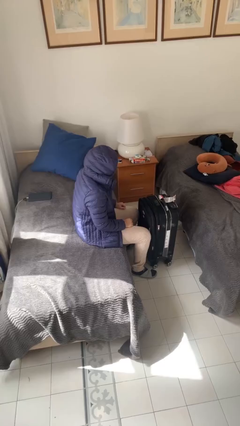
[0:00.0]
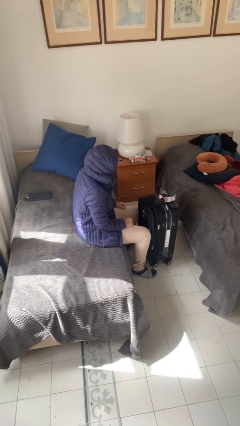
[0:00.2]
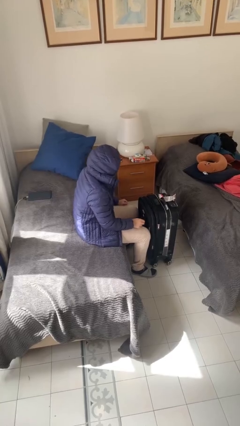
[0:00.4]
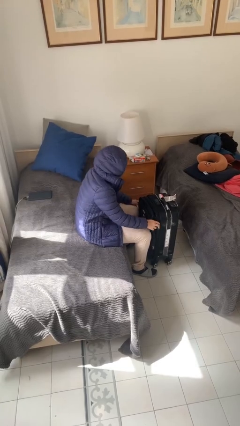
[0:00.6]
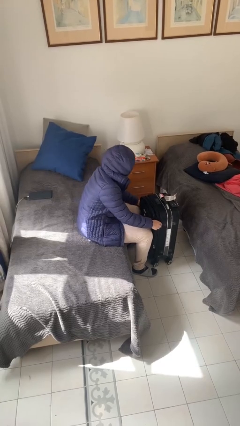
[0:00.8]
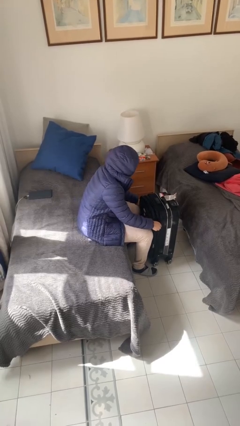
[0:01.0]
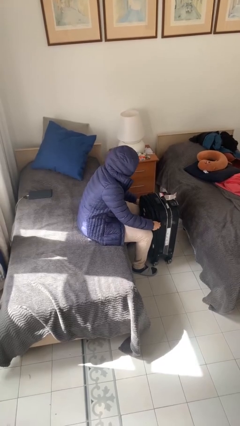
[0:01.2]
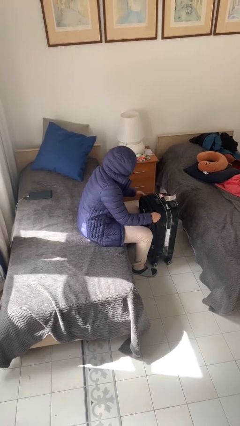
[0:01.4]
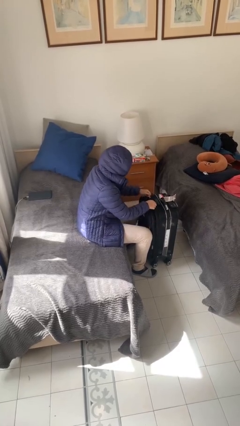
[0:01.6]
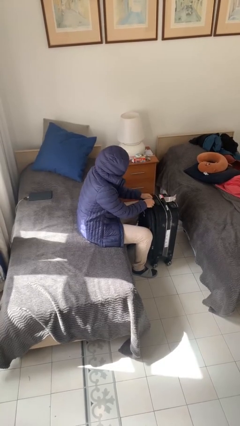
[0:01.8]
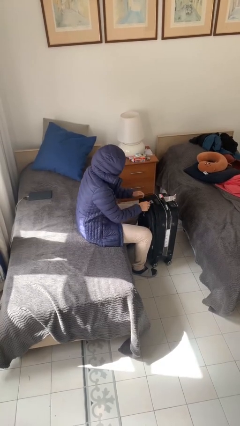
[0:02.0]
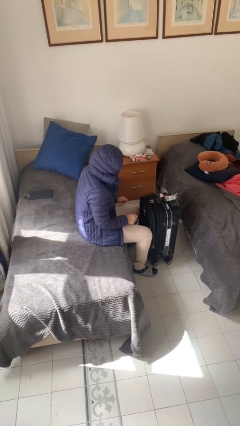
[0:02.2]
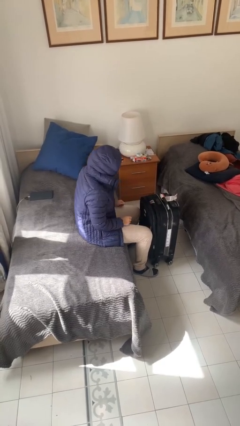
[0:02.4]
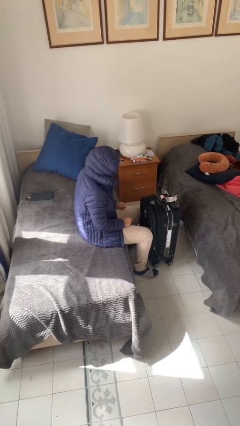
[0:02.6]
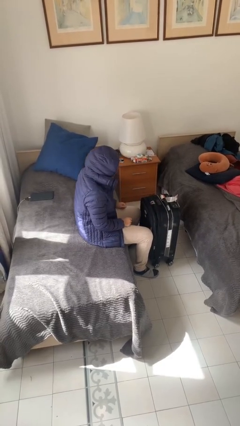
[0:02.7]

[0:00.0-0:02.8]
person closes suitcase

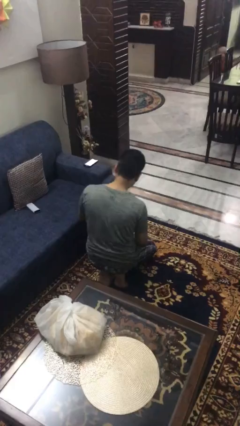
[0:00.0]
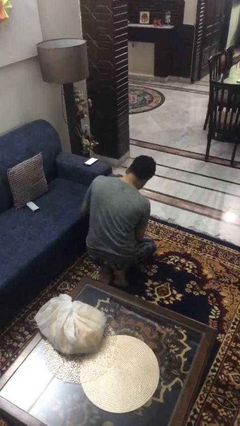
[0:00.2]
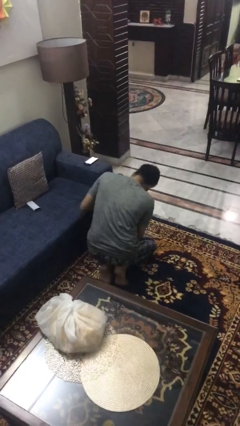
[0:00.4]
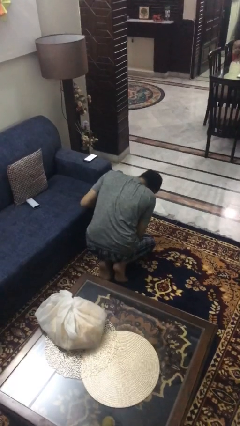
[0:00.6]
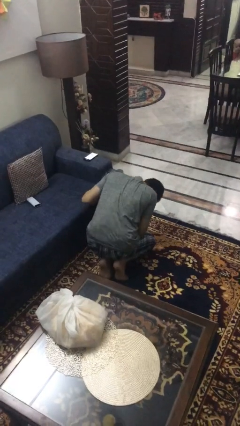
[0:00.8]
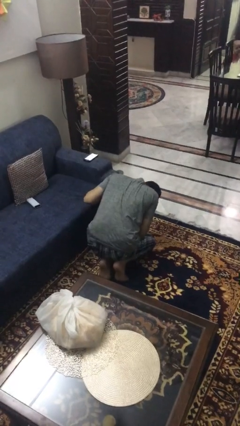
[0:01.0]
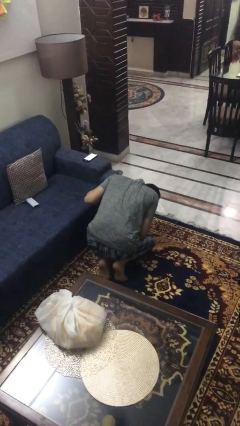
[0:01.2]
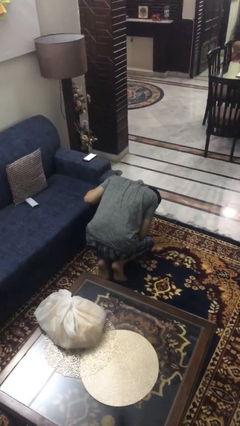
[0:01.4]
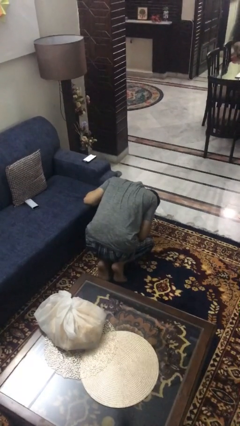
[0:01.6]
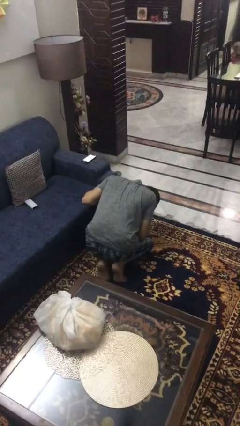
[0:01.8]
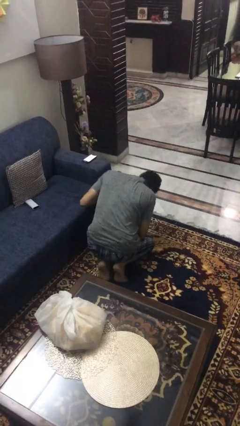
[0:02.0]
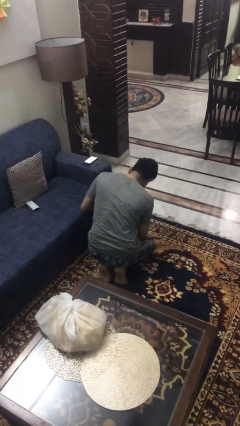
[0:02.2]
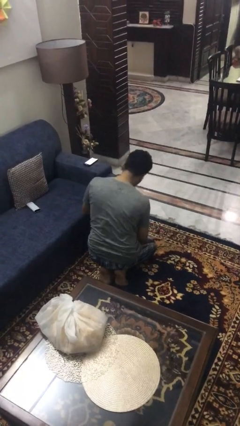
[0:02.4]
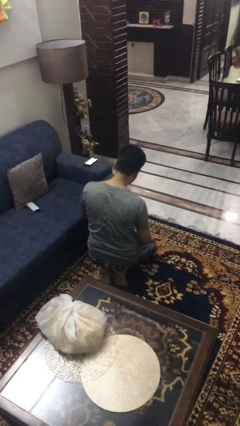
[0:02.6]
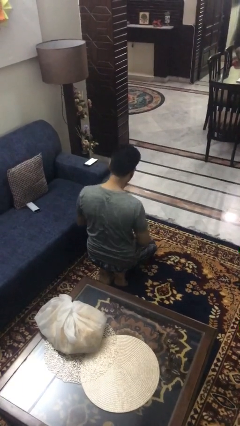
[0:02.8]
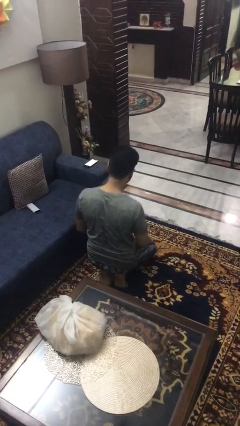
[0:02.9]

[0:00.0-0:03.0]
person searches under couch

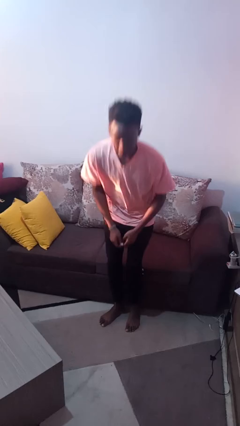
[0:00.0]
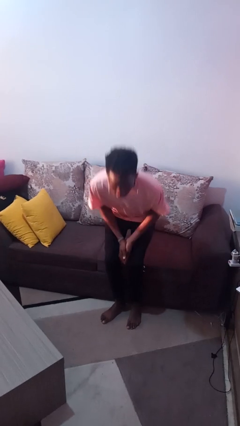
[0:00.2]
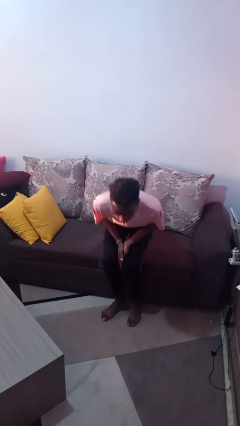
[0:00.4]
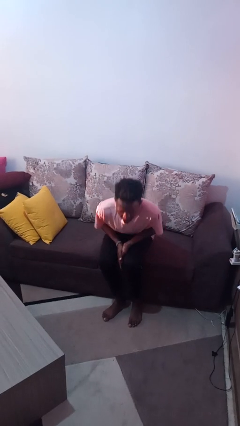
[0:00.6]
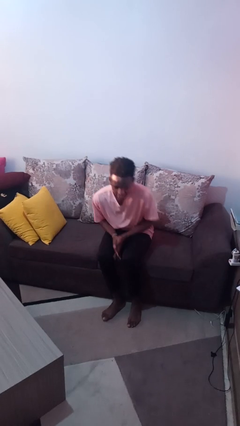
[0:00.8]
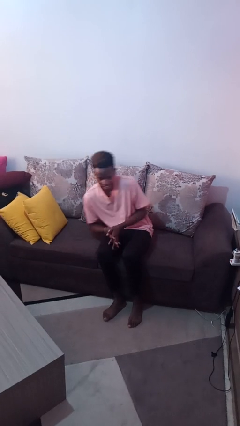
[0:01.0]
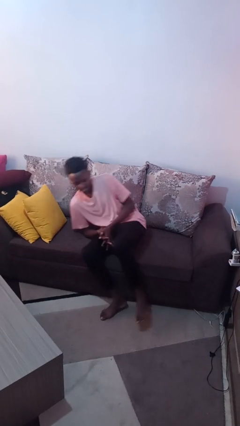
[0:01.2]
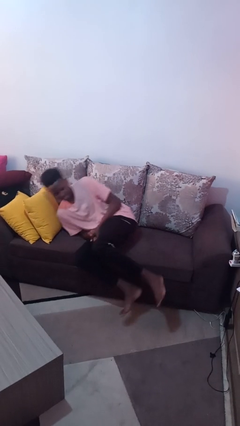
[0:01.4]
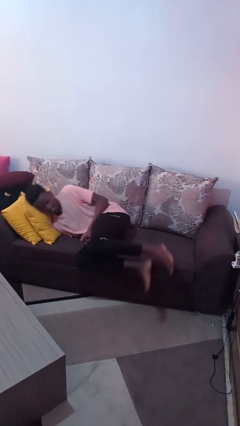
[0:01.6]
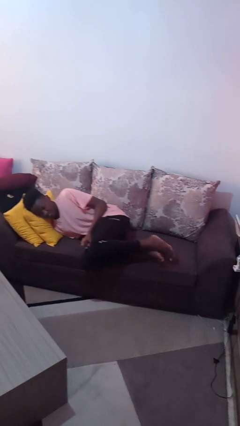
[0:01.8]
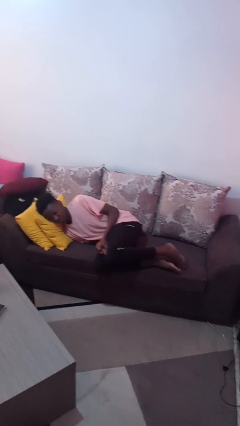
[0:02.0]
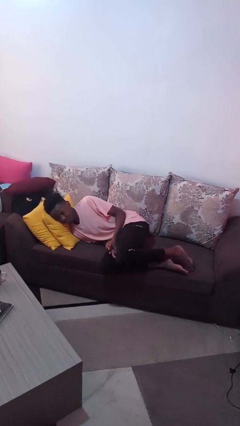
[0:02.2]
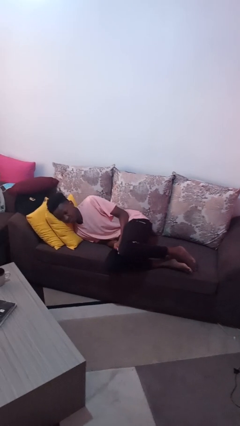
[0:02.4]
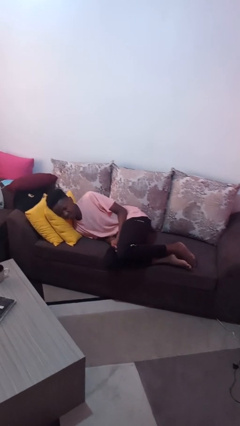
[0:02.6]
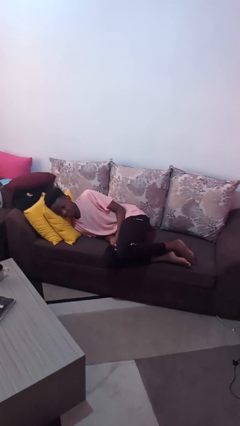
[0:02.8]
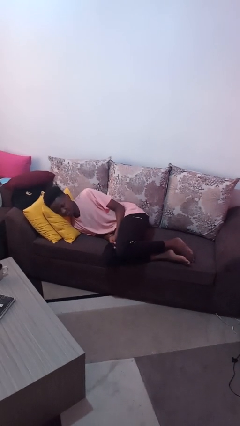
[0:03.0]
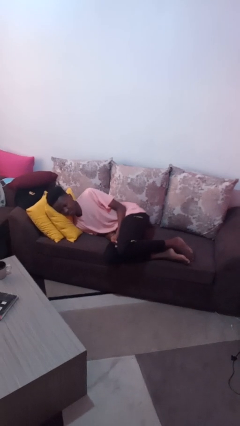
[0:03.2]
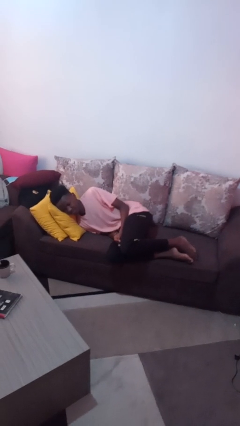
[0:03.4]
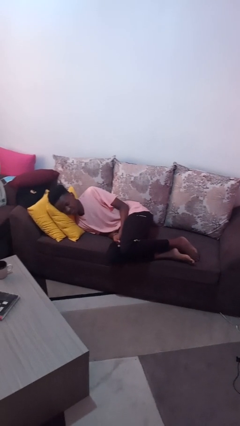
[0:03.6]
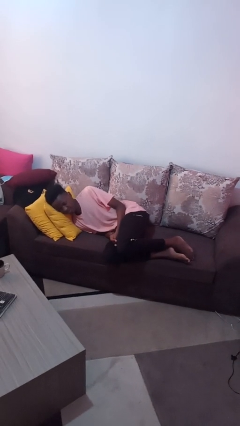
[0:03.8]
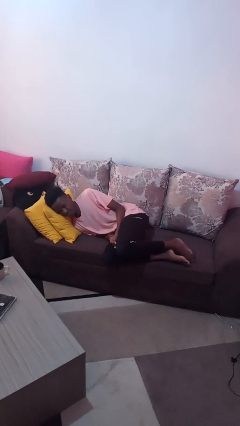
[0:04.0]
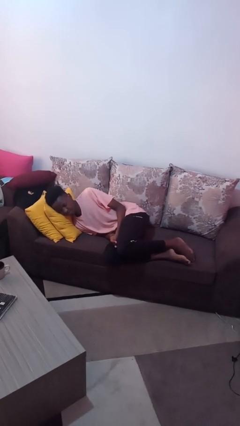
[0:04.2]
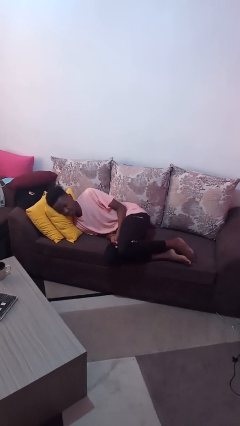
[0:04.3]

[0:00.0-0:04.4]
person lies down on couch

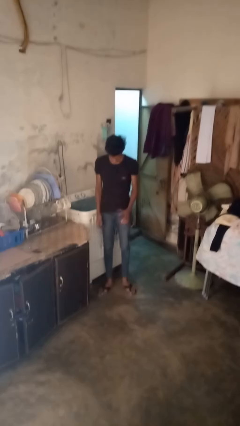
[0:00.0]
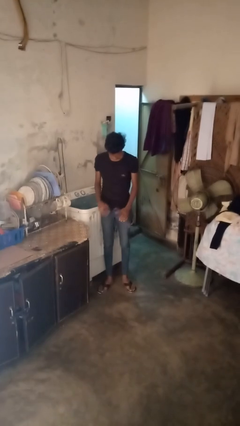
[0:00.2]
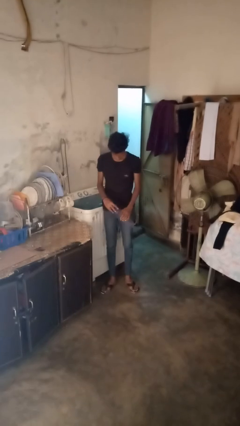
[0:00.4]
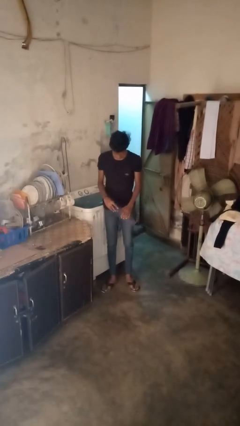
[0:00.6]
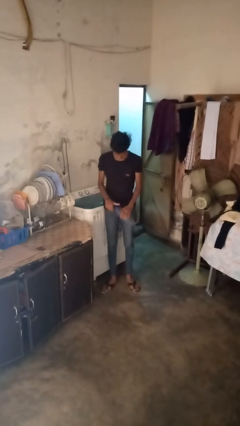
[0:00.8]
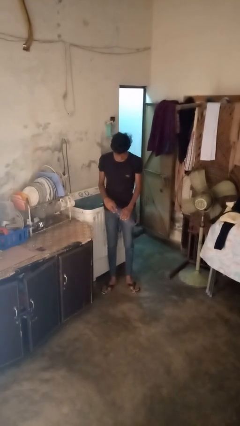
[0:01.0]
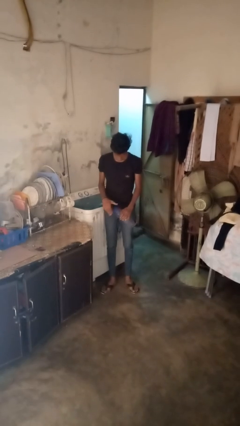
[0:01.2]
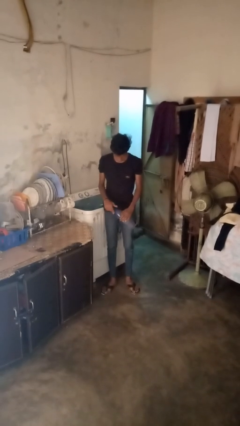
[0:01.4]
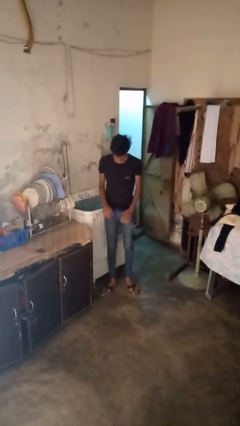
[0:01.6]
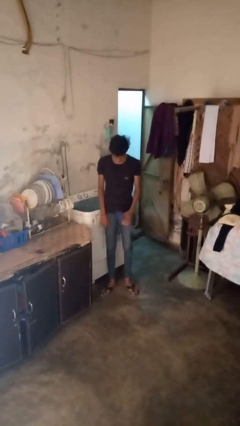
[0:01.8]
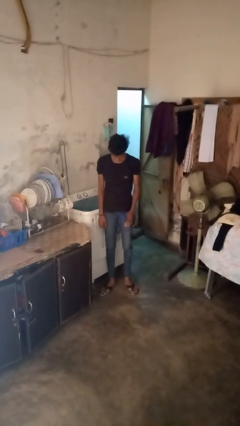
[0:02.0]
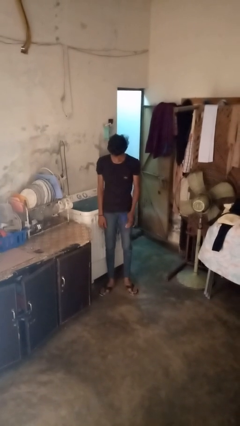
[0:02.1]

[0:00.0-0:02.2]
person screws lid to bottle

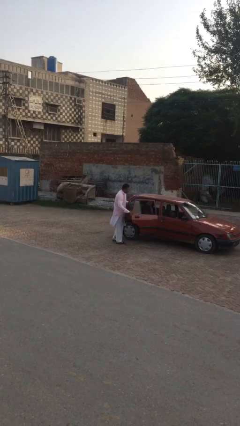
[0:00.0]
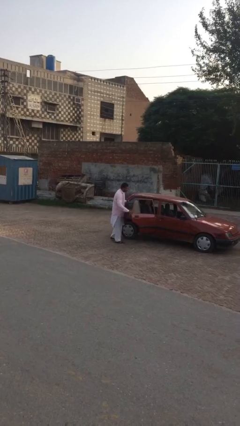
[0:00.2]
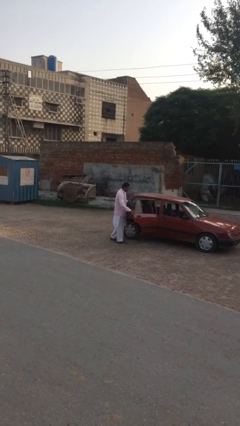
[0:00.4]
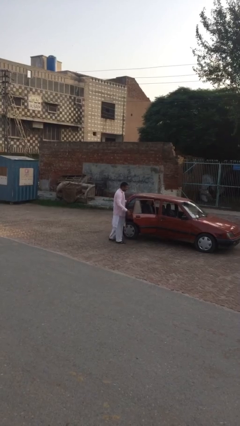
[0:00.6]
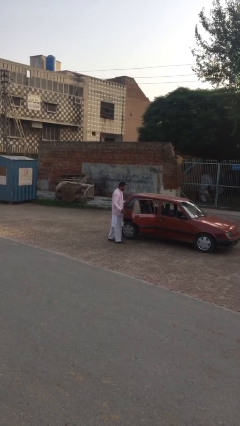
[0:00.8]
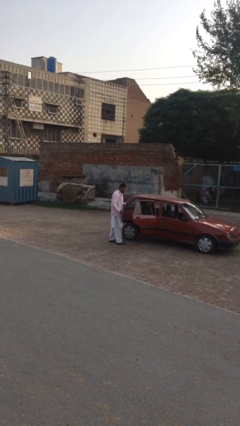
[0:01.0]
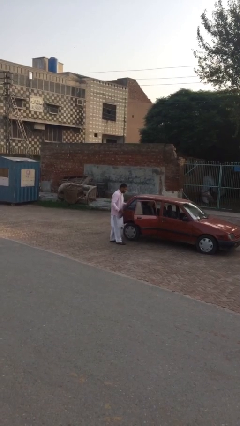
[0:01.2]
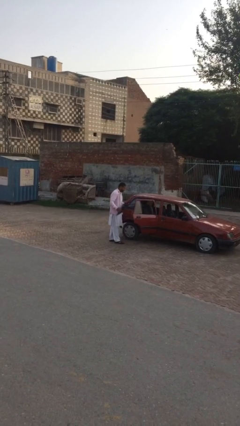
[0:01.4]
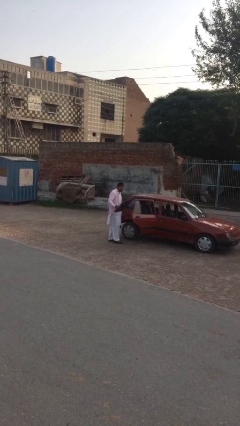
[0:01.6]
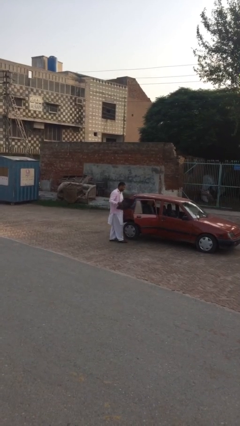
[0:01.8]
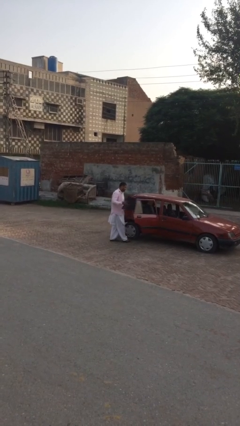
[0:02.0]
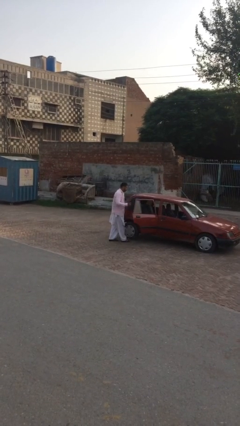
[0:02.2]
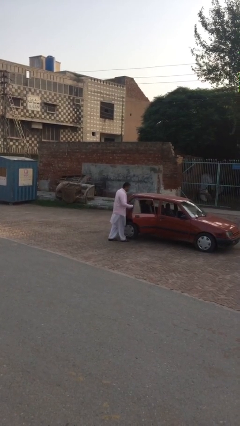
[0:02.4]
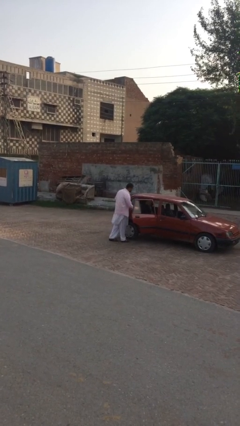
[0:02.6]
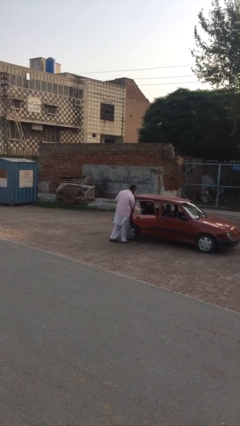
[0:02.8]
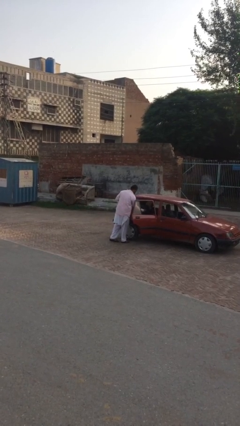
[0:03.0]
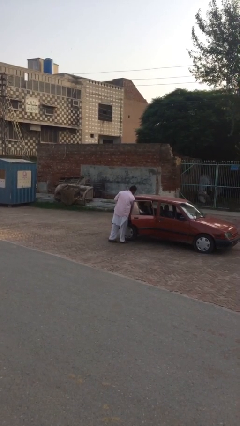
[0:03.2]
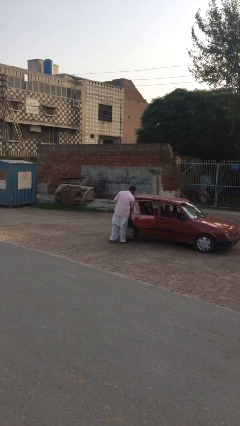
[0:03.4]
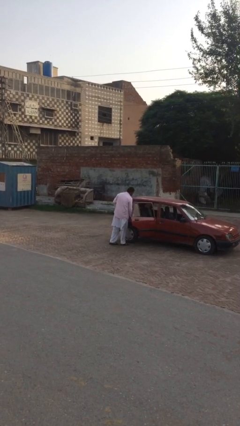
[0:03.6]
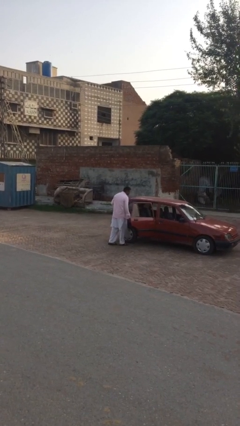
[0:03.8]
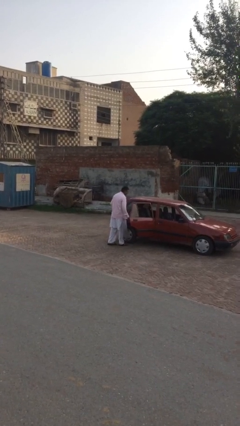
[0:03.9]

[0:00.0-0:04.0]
person loads car

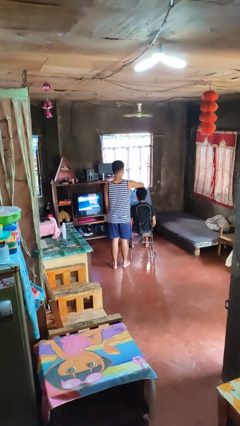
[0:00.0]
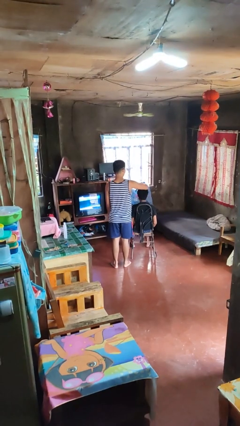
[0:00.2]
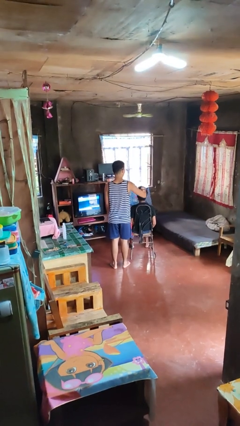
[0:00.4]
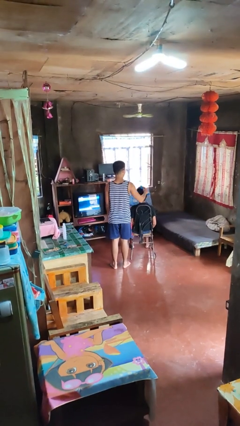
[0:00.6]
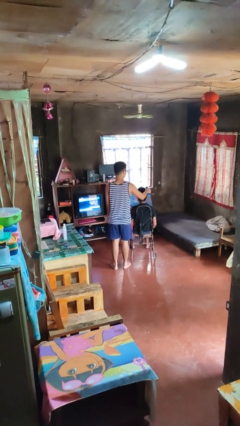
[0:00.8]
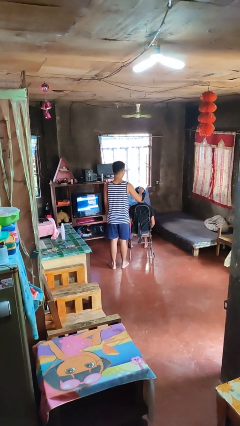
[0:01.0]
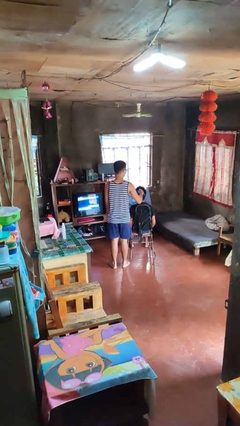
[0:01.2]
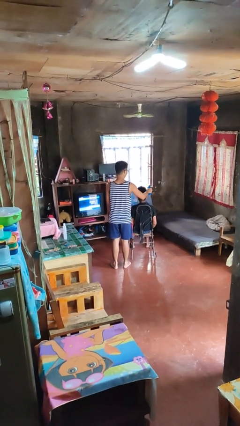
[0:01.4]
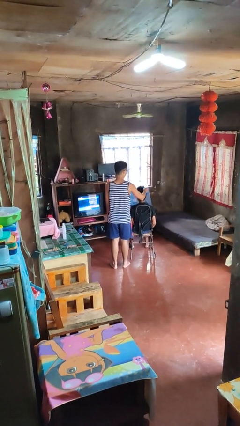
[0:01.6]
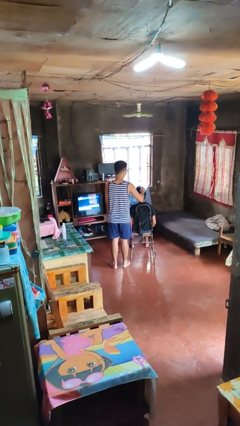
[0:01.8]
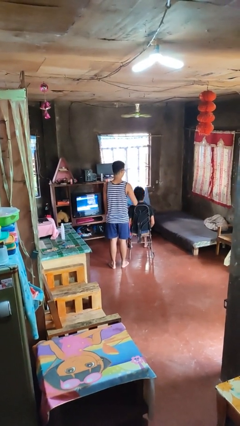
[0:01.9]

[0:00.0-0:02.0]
person brushes hair of person
